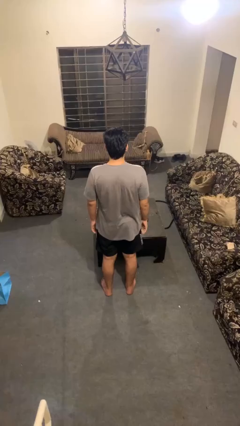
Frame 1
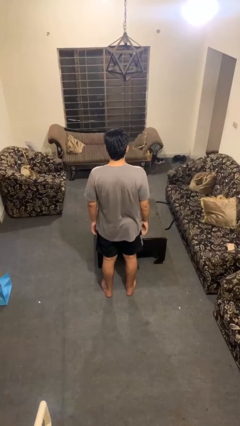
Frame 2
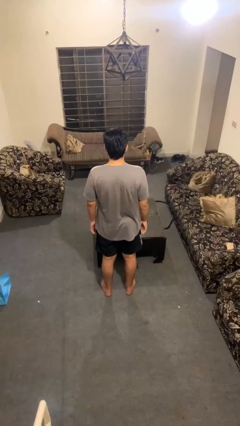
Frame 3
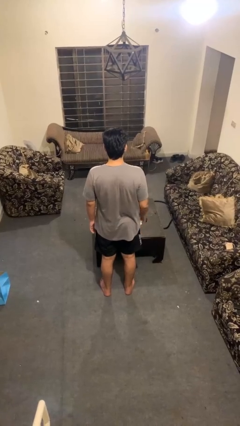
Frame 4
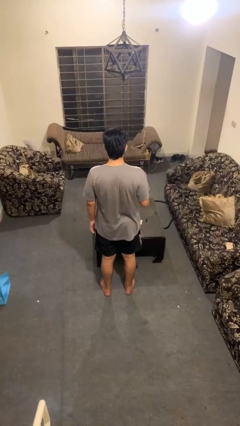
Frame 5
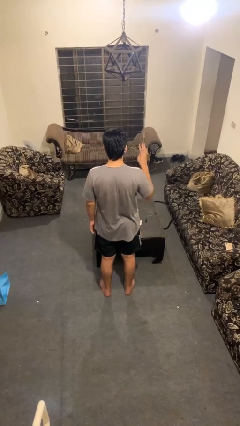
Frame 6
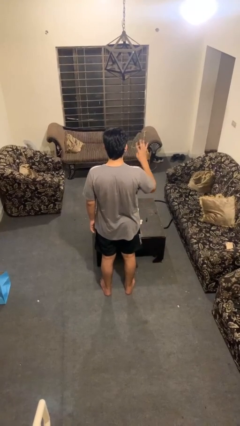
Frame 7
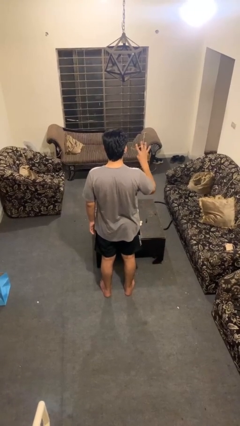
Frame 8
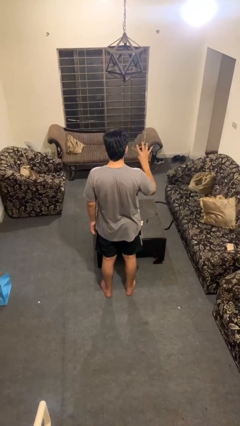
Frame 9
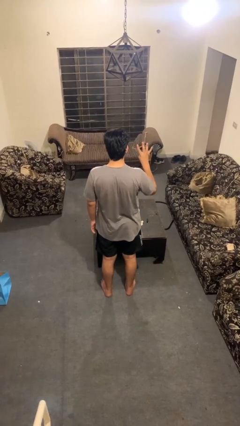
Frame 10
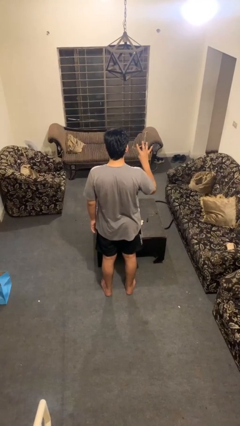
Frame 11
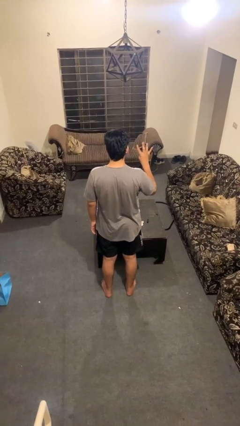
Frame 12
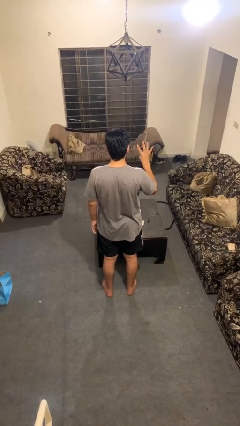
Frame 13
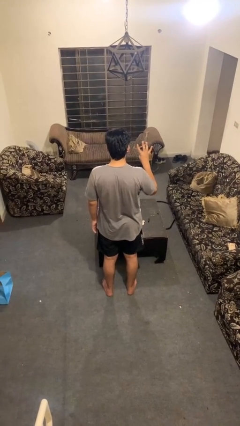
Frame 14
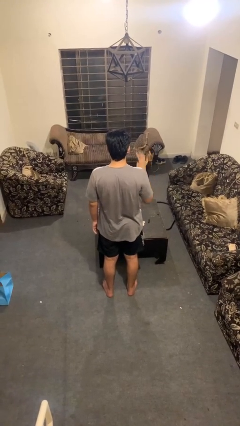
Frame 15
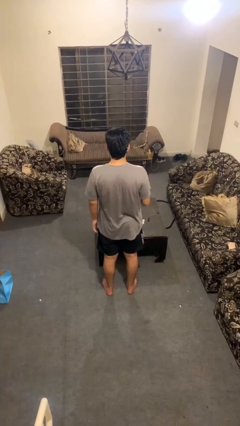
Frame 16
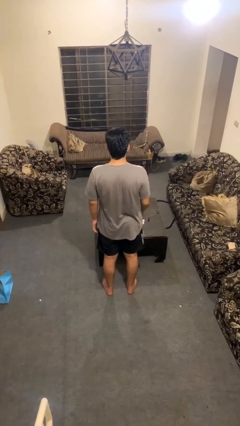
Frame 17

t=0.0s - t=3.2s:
person gestures number four

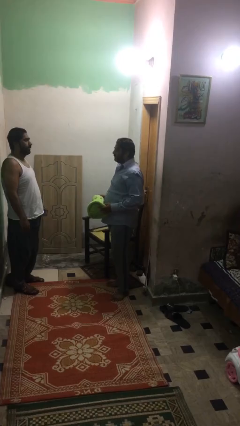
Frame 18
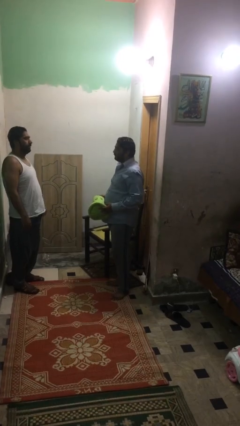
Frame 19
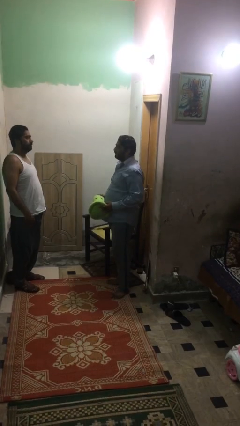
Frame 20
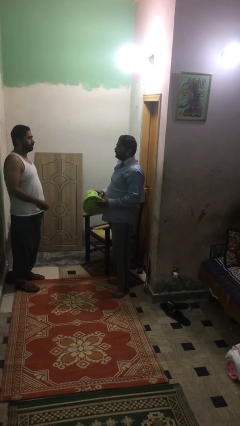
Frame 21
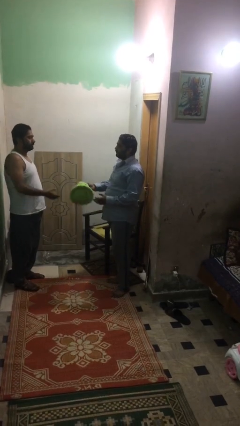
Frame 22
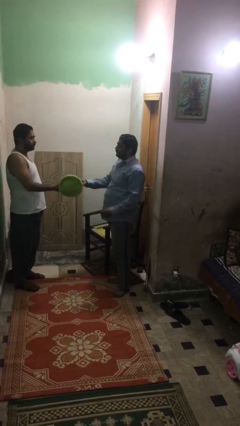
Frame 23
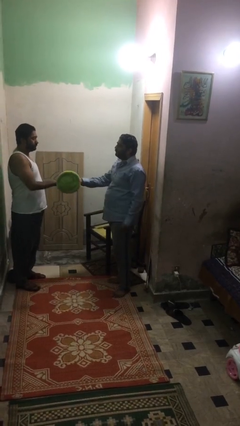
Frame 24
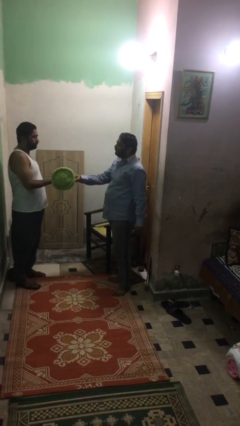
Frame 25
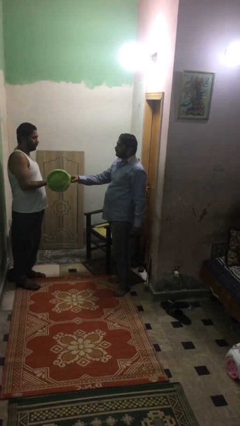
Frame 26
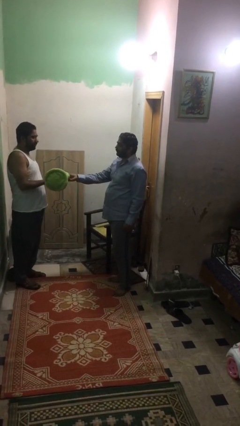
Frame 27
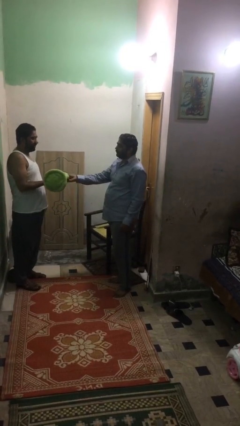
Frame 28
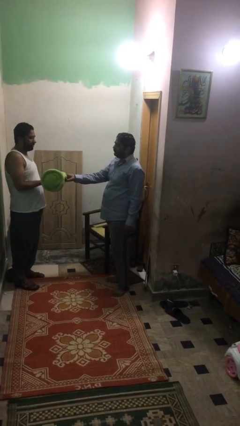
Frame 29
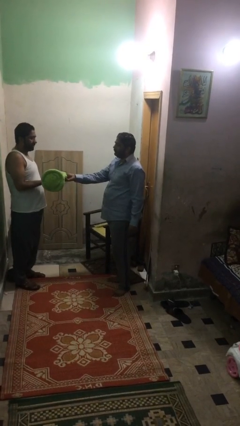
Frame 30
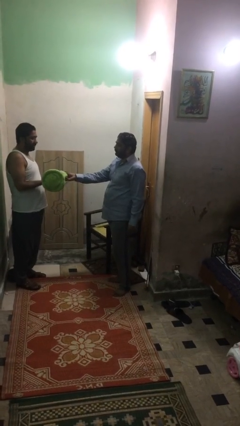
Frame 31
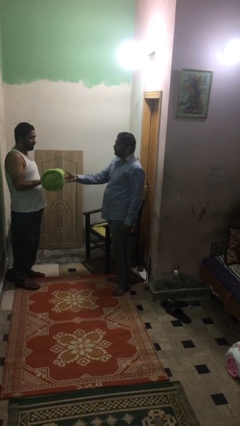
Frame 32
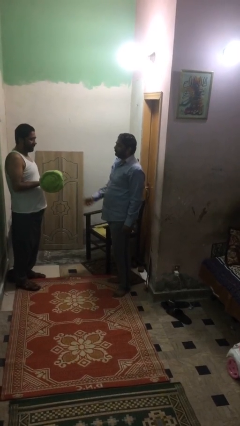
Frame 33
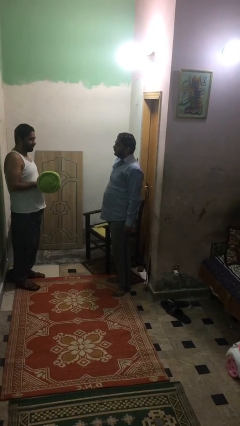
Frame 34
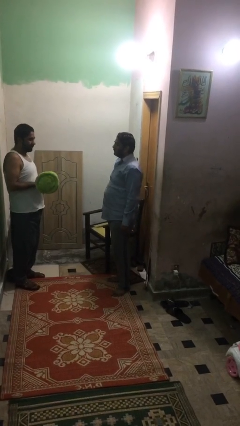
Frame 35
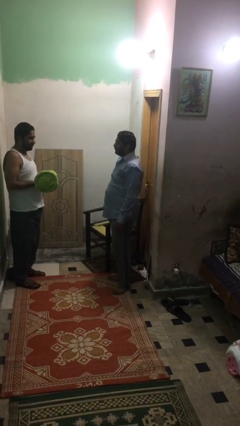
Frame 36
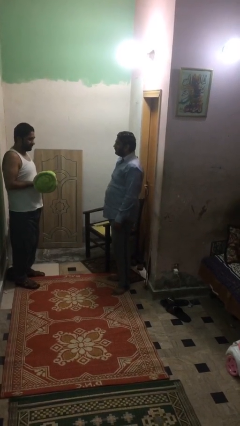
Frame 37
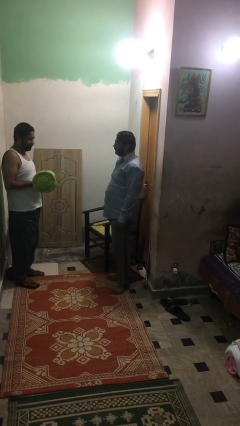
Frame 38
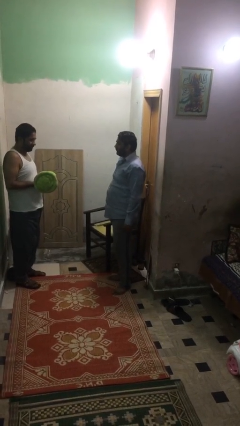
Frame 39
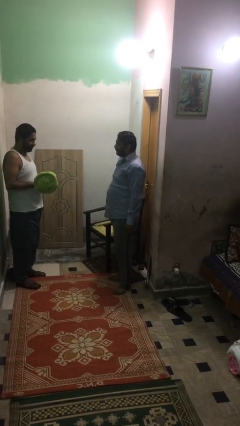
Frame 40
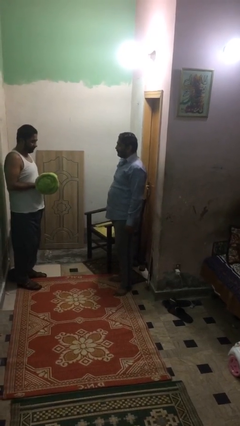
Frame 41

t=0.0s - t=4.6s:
person transfers object to person

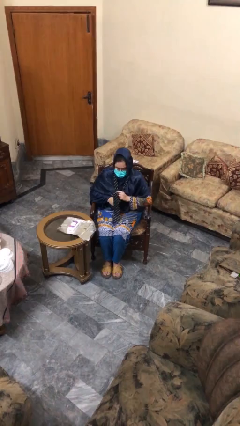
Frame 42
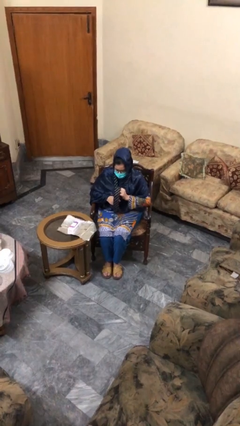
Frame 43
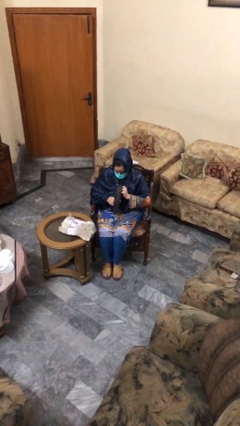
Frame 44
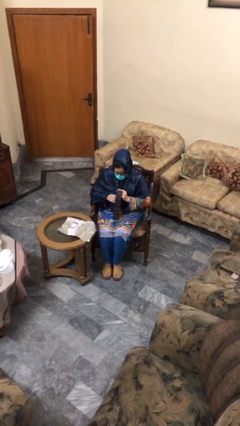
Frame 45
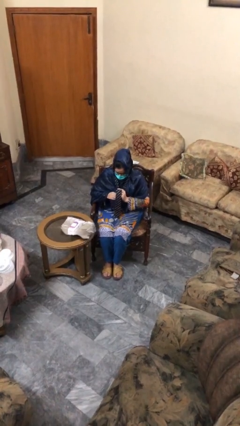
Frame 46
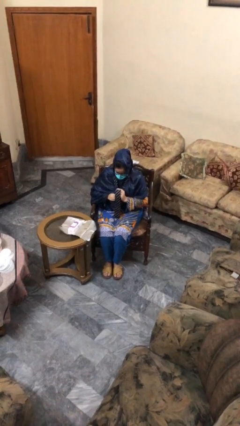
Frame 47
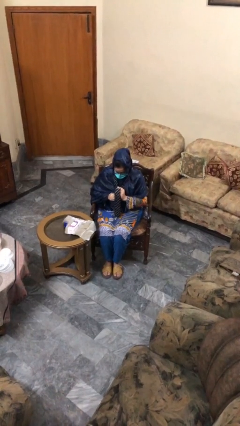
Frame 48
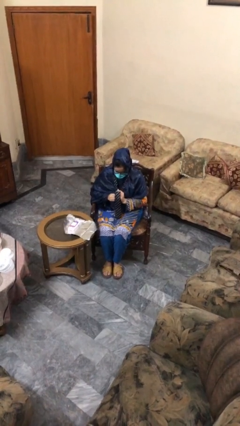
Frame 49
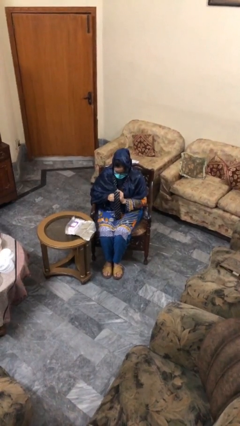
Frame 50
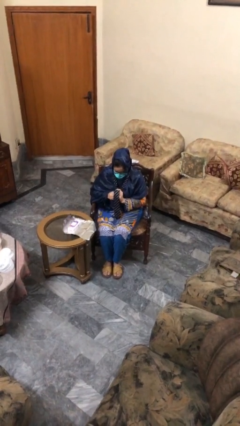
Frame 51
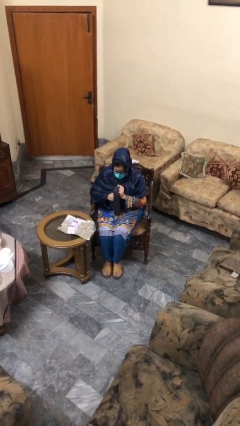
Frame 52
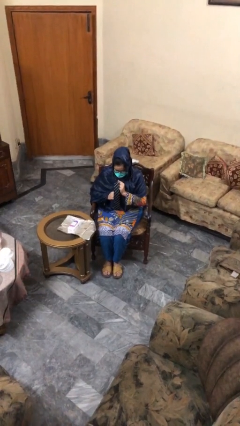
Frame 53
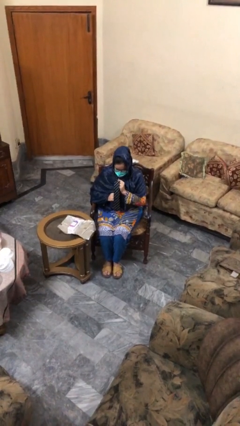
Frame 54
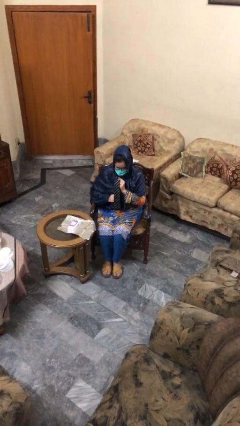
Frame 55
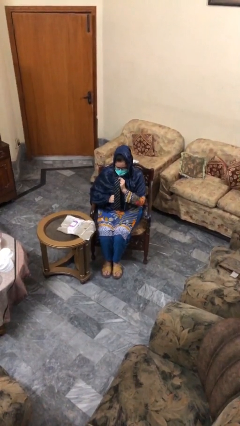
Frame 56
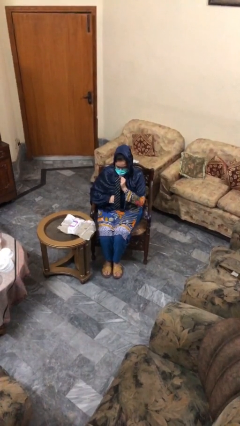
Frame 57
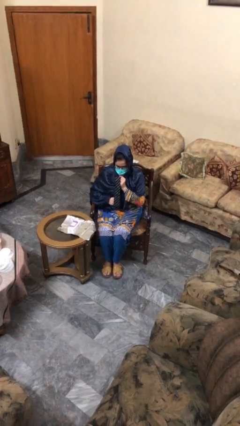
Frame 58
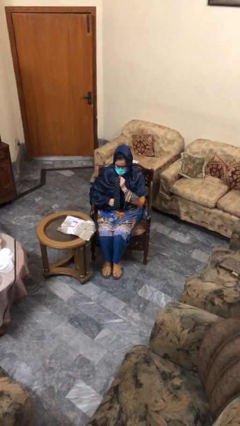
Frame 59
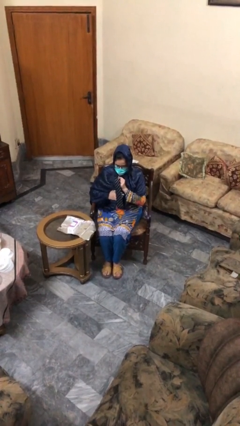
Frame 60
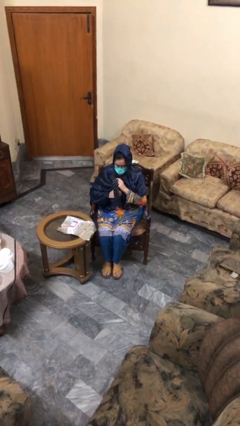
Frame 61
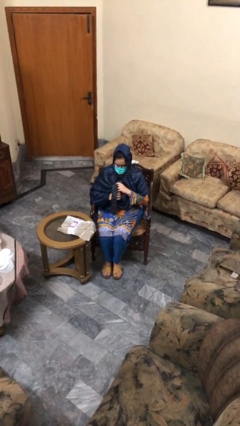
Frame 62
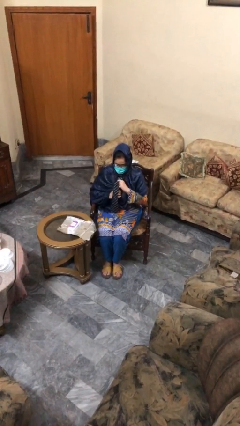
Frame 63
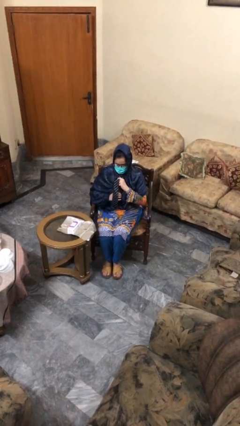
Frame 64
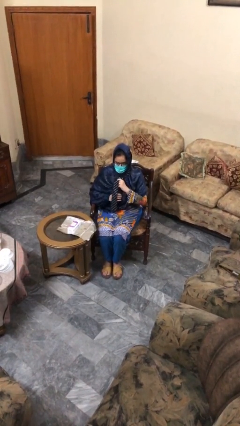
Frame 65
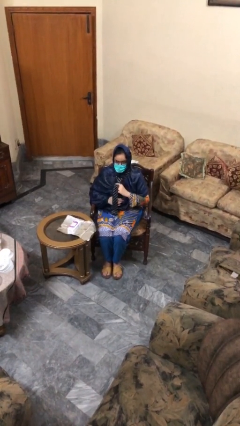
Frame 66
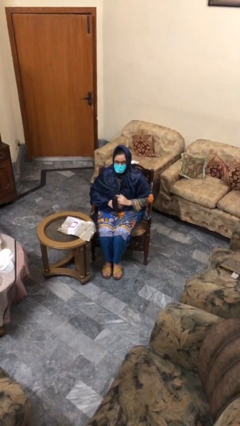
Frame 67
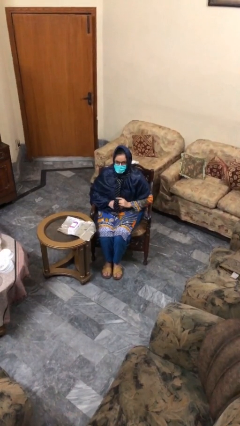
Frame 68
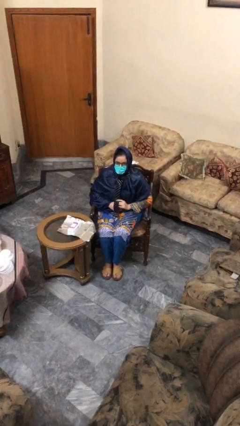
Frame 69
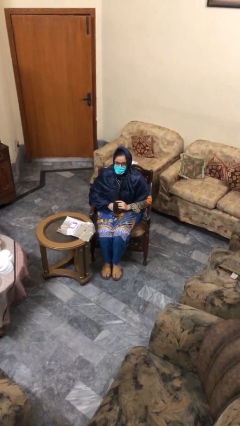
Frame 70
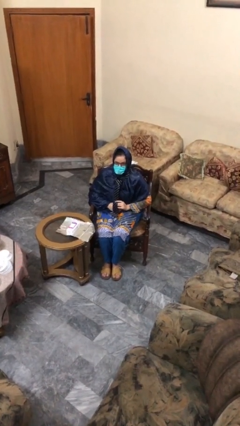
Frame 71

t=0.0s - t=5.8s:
person puts on necktie

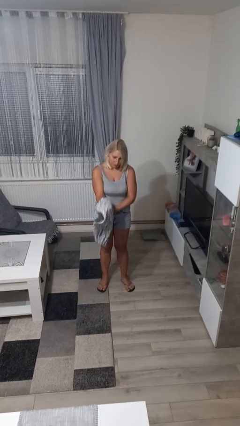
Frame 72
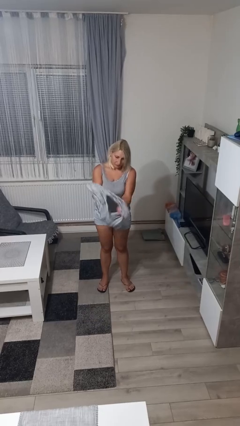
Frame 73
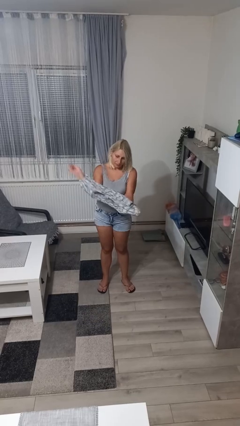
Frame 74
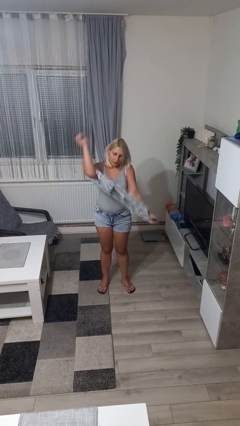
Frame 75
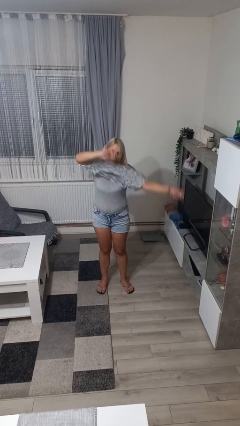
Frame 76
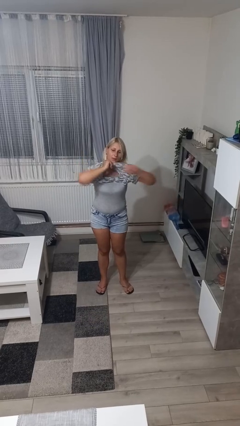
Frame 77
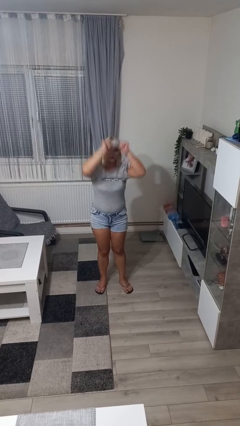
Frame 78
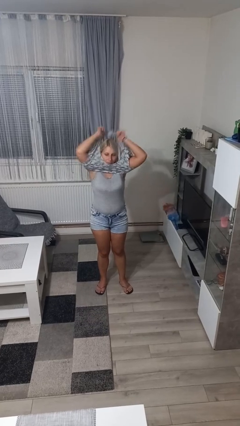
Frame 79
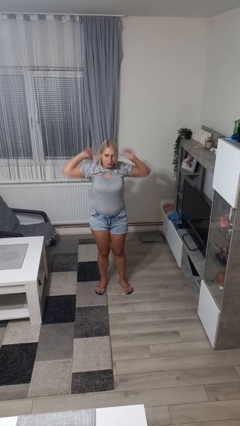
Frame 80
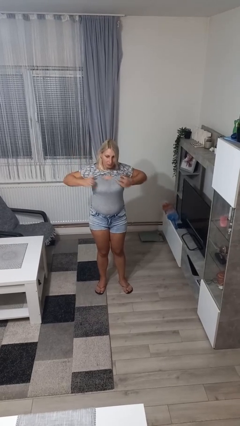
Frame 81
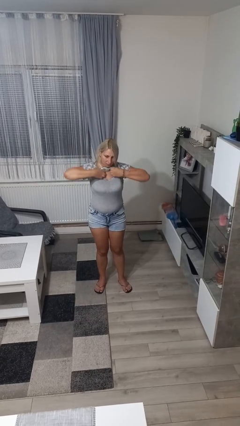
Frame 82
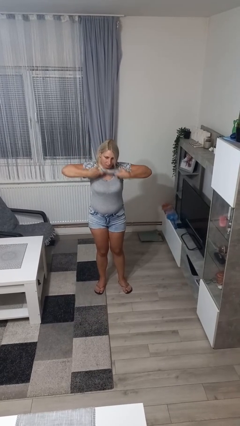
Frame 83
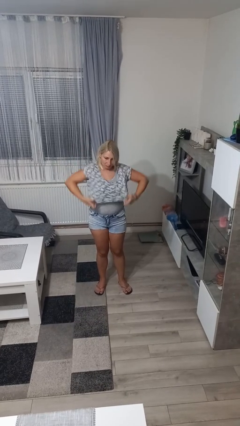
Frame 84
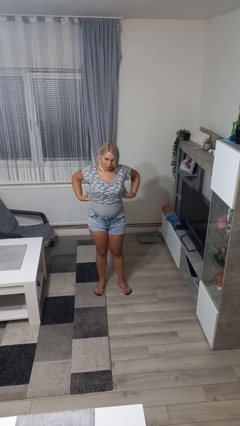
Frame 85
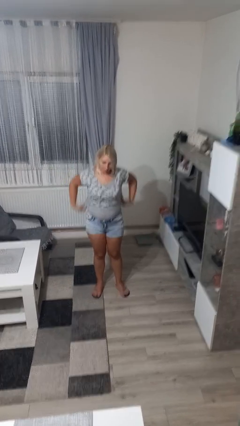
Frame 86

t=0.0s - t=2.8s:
person puts on shirt

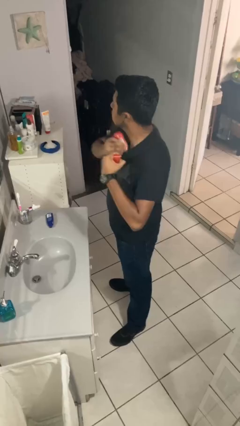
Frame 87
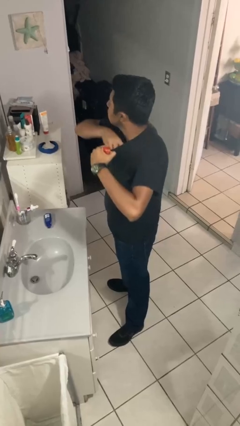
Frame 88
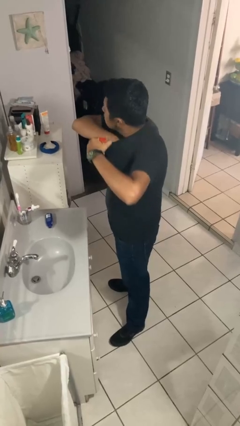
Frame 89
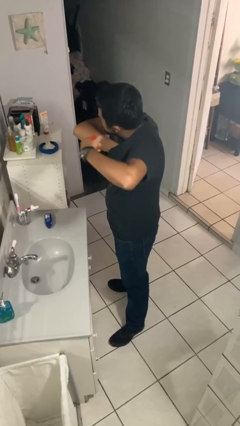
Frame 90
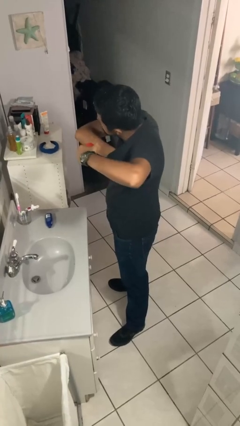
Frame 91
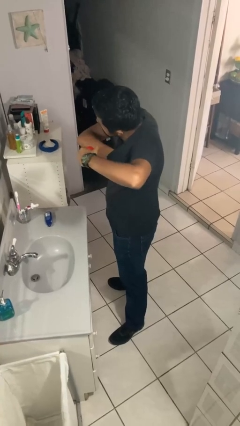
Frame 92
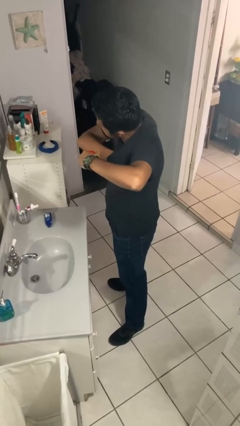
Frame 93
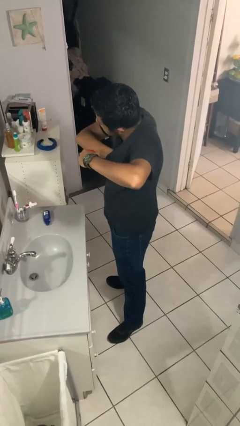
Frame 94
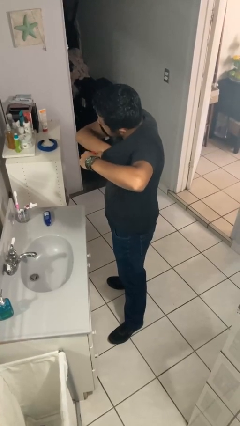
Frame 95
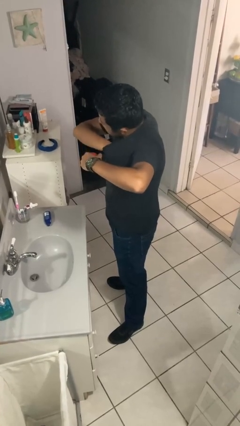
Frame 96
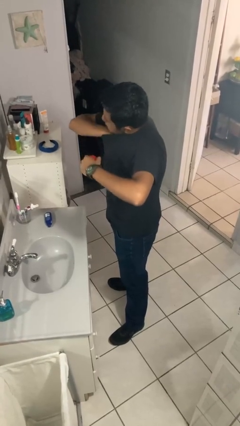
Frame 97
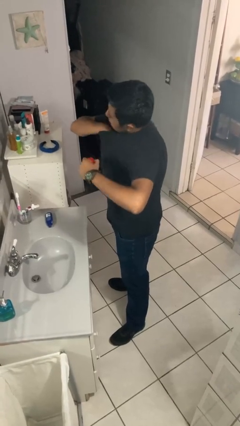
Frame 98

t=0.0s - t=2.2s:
person applies deodorant
